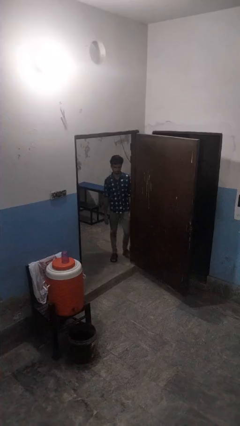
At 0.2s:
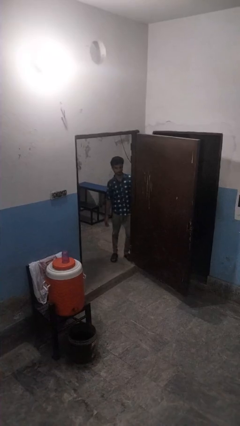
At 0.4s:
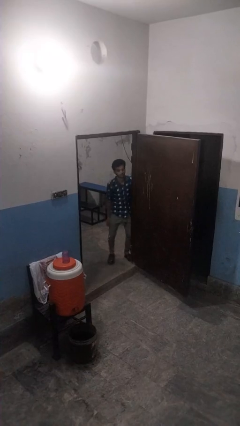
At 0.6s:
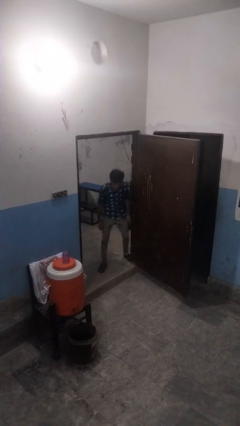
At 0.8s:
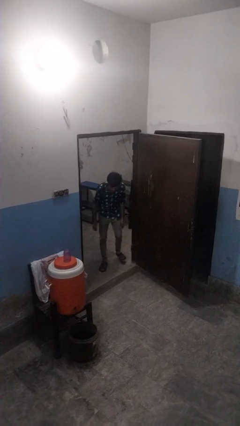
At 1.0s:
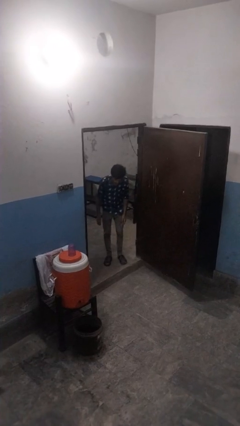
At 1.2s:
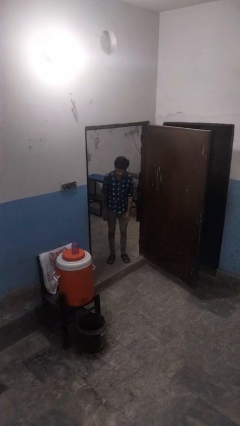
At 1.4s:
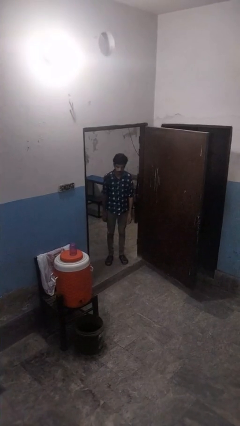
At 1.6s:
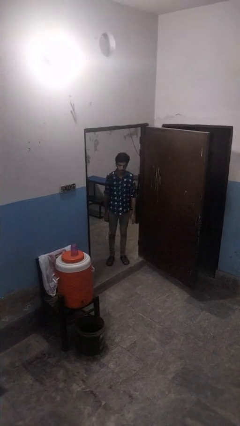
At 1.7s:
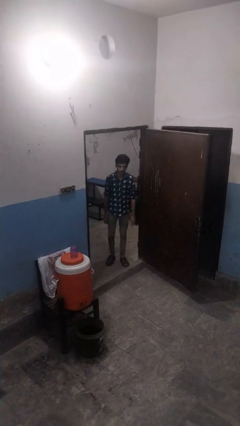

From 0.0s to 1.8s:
person bumps into wall

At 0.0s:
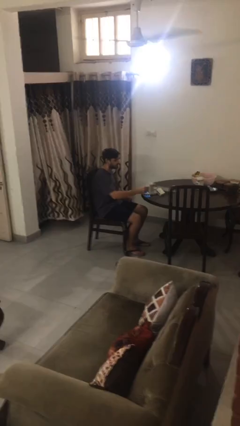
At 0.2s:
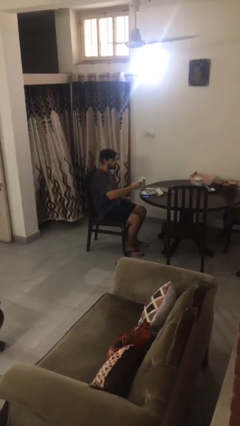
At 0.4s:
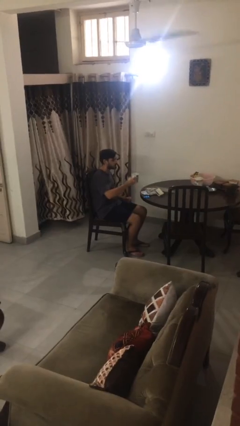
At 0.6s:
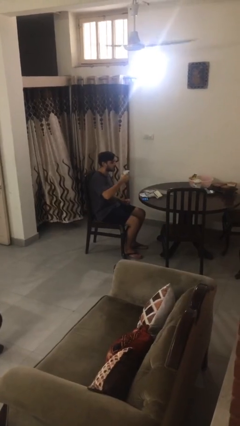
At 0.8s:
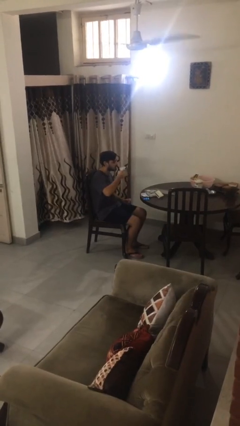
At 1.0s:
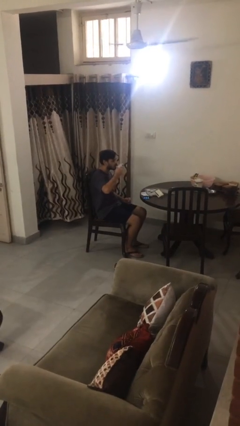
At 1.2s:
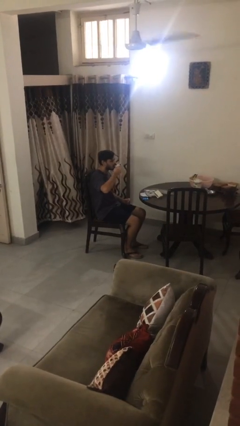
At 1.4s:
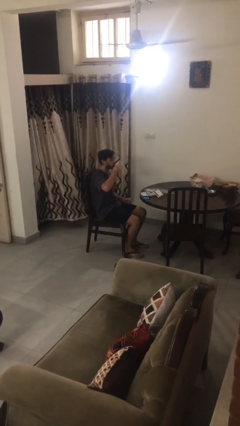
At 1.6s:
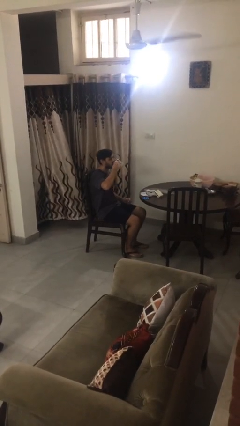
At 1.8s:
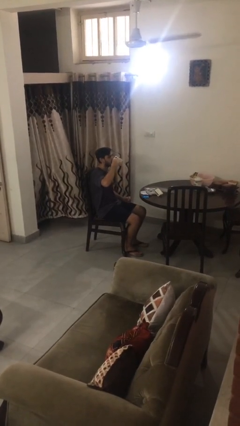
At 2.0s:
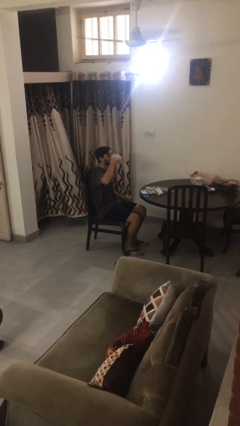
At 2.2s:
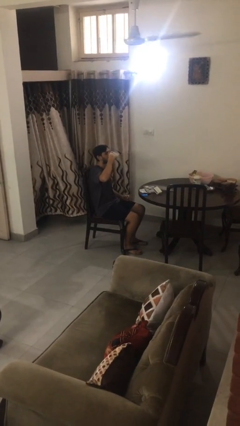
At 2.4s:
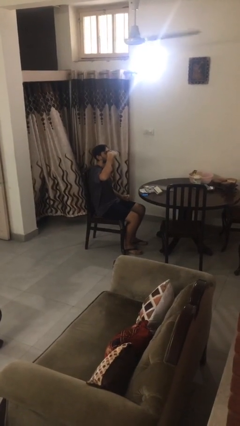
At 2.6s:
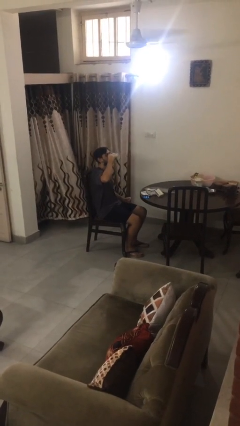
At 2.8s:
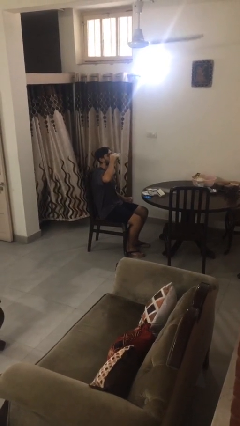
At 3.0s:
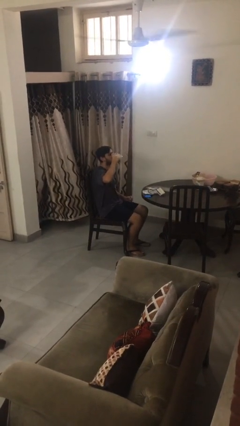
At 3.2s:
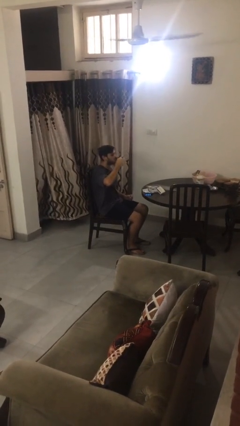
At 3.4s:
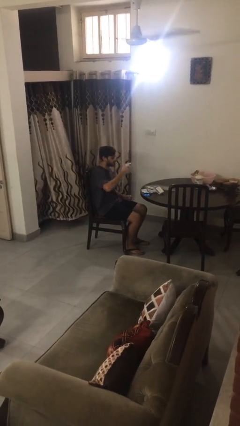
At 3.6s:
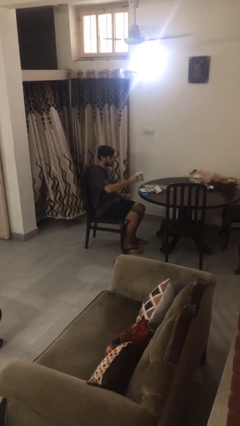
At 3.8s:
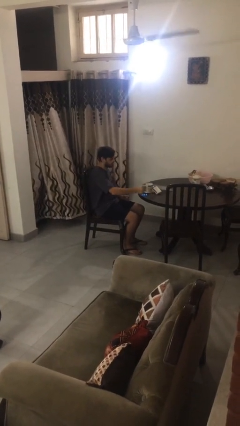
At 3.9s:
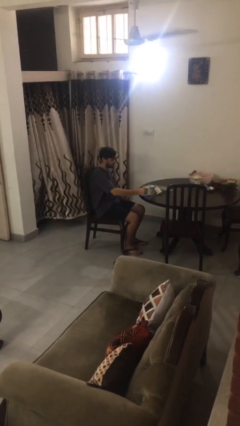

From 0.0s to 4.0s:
person drinks from cup

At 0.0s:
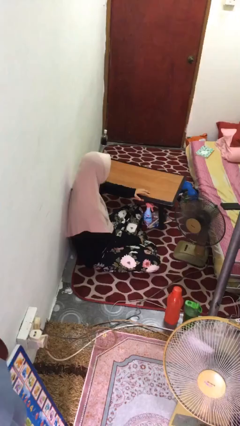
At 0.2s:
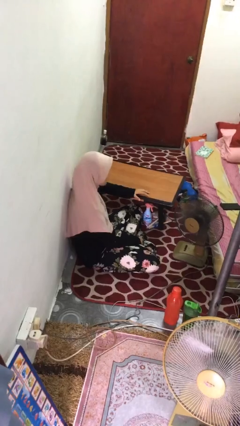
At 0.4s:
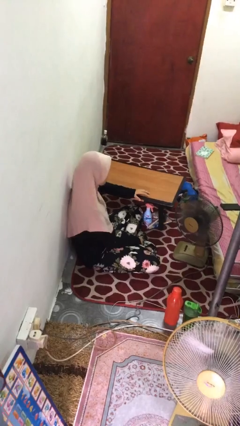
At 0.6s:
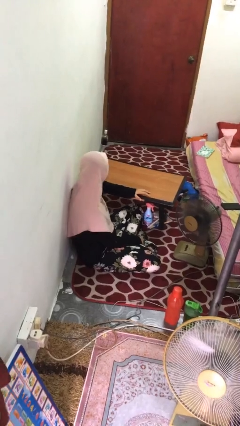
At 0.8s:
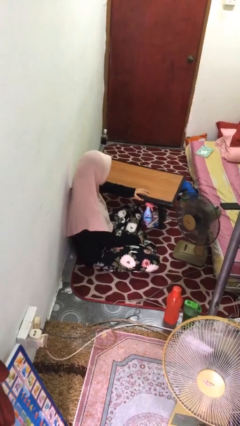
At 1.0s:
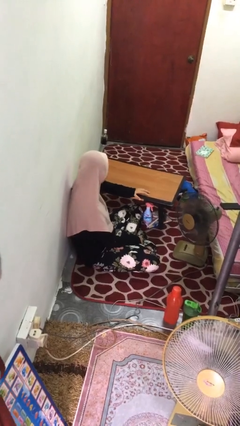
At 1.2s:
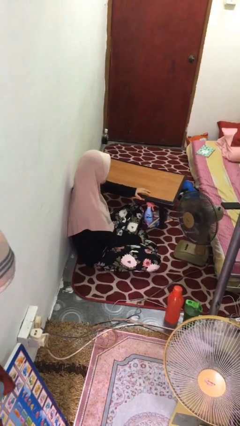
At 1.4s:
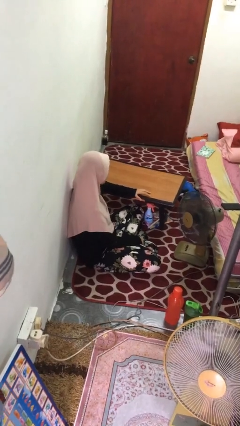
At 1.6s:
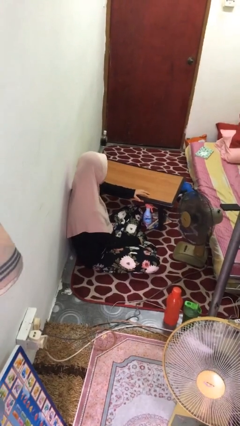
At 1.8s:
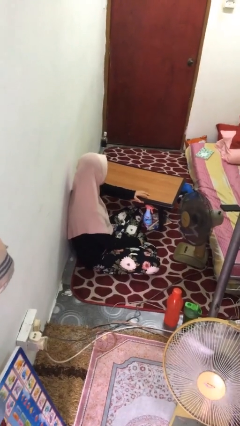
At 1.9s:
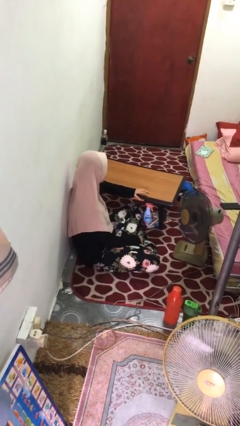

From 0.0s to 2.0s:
person shakes head

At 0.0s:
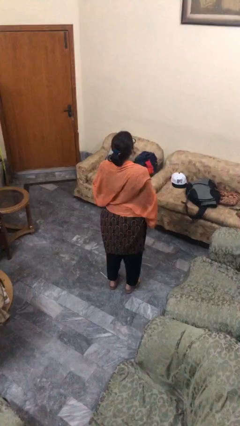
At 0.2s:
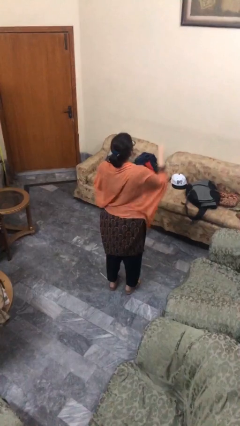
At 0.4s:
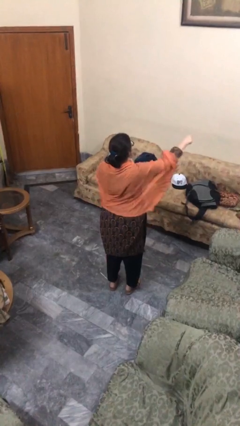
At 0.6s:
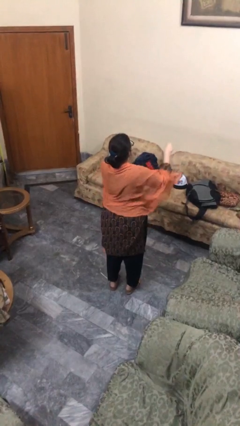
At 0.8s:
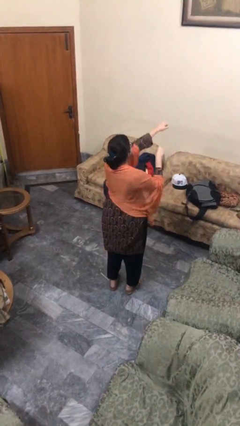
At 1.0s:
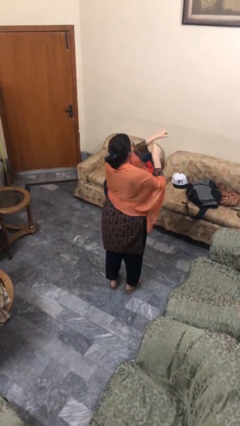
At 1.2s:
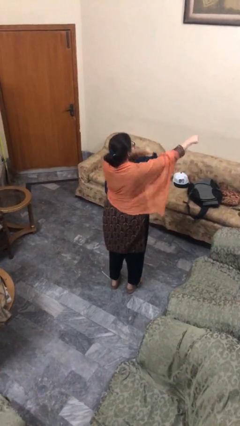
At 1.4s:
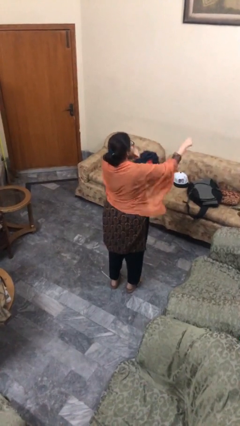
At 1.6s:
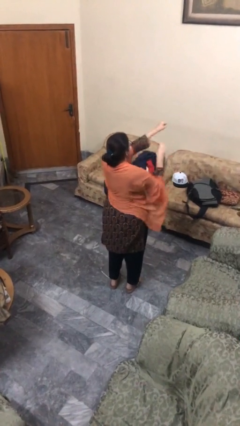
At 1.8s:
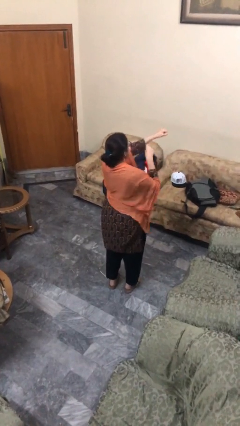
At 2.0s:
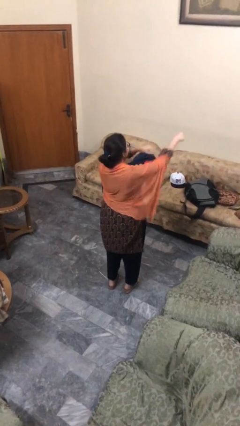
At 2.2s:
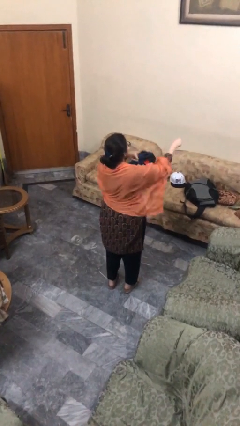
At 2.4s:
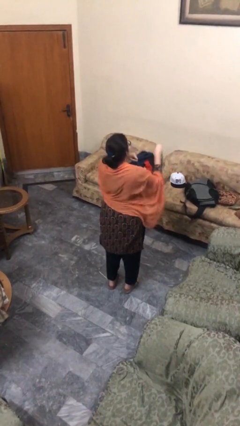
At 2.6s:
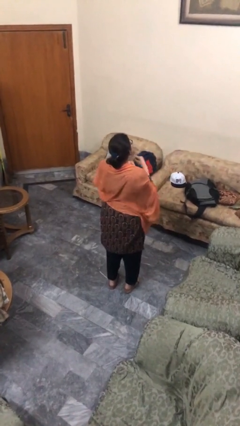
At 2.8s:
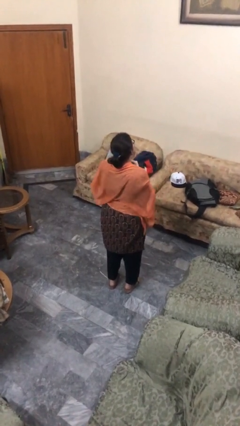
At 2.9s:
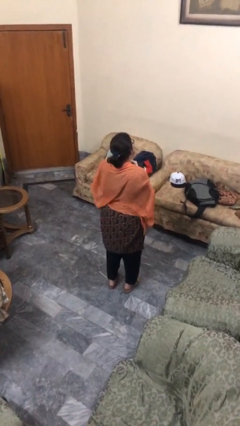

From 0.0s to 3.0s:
person punches

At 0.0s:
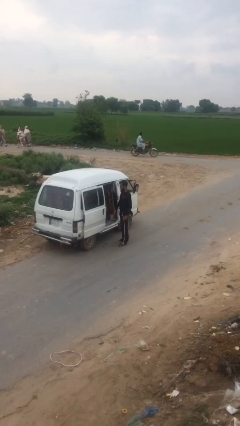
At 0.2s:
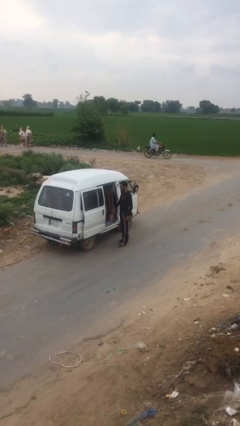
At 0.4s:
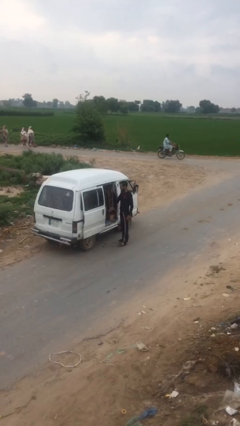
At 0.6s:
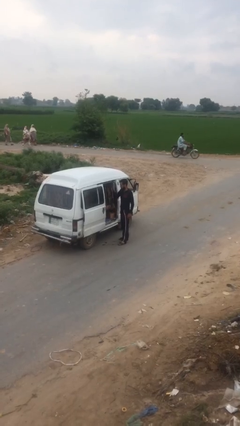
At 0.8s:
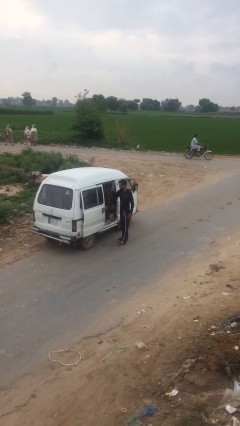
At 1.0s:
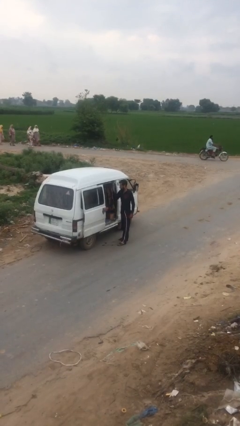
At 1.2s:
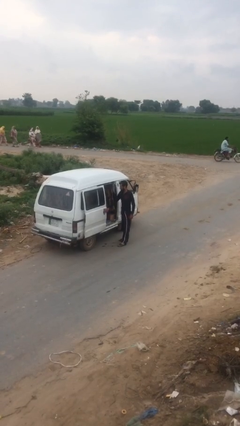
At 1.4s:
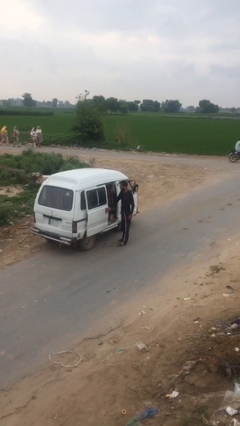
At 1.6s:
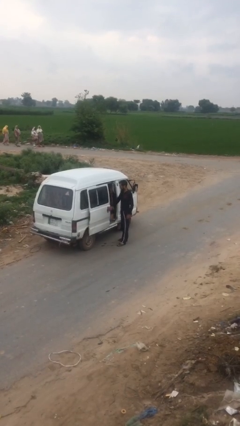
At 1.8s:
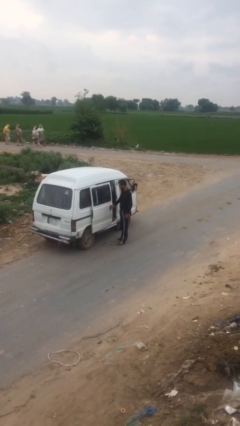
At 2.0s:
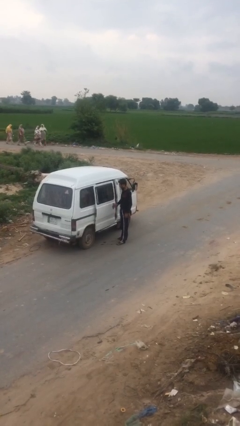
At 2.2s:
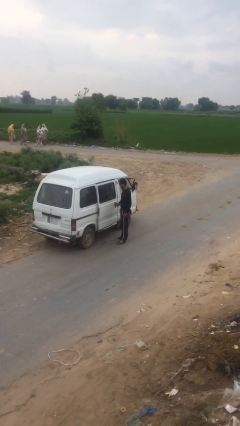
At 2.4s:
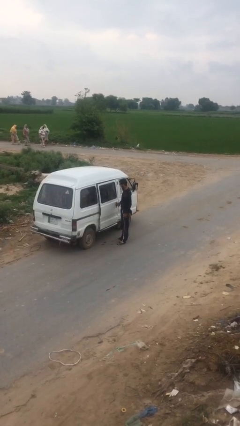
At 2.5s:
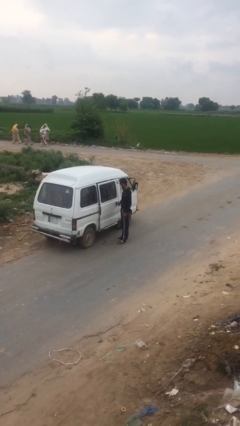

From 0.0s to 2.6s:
person closes car door

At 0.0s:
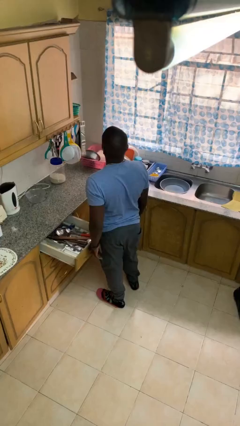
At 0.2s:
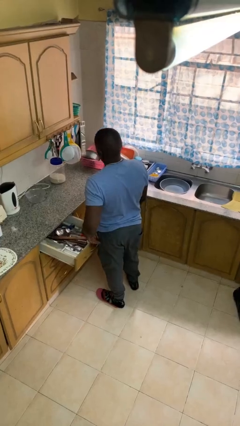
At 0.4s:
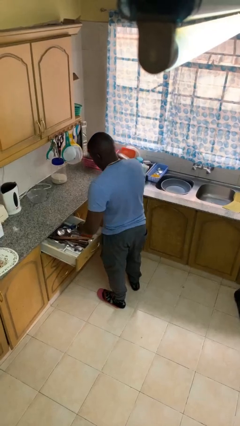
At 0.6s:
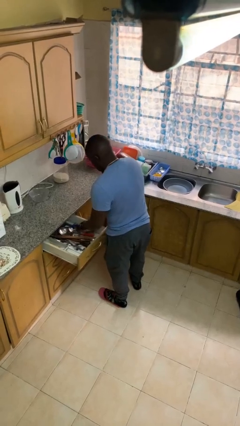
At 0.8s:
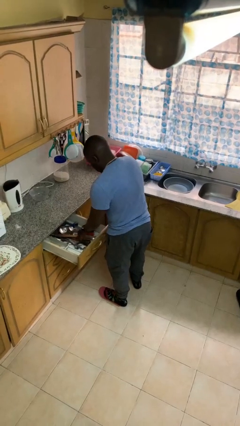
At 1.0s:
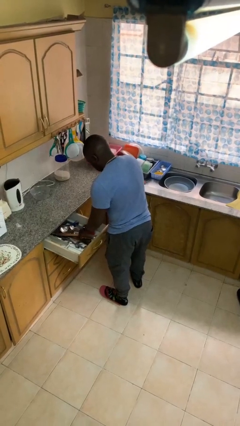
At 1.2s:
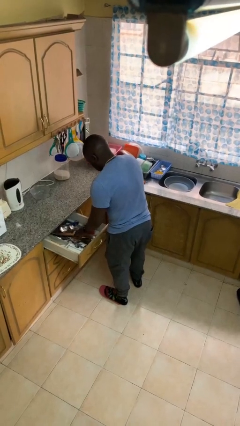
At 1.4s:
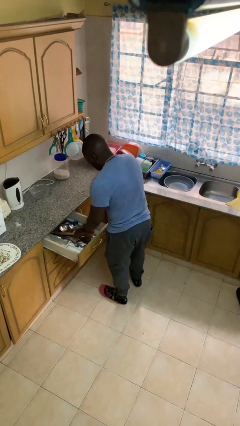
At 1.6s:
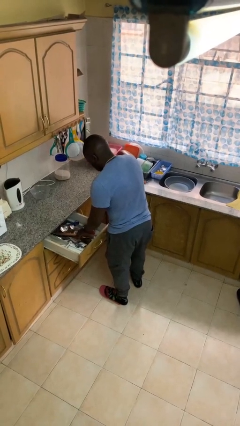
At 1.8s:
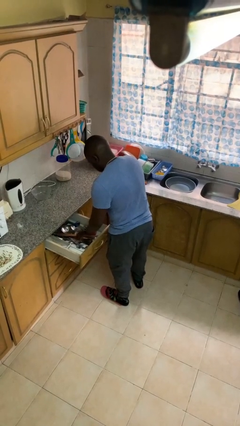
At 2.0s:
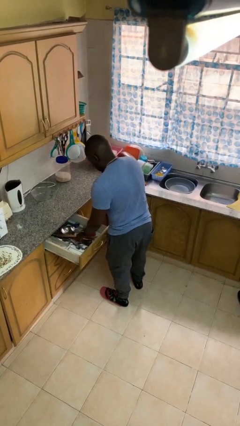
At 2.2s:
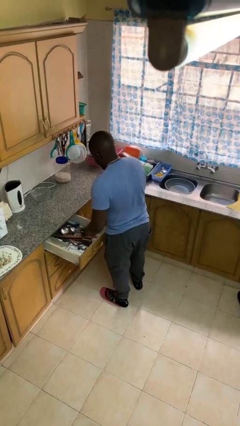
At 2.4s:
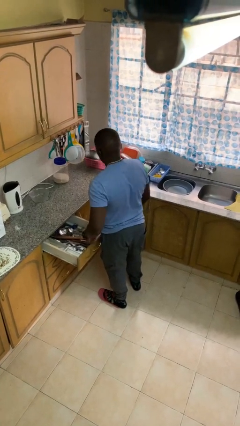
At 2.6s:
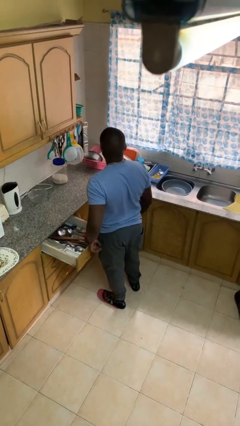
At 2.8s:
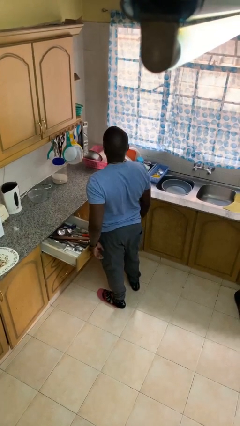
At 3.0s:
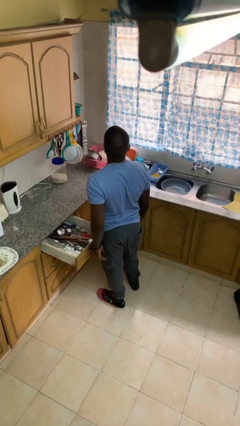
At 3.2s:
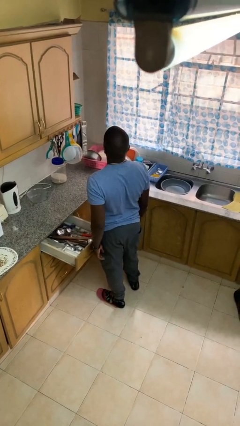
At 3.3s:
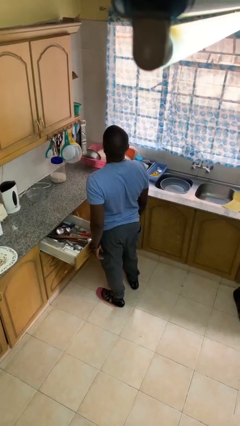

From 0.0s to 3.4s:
person searches in kitchen drawer

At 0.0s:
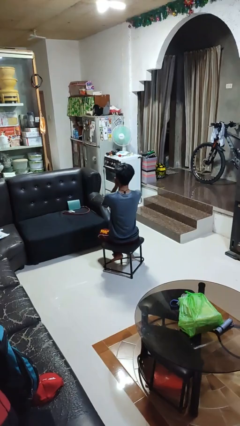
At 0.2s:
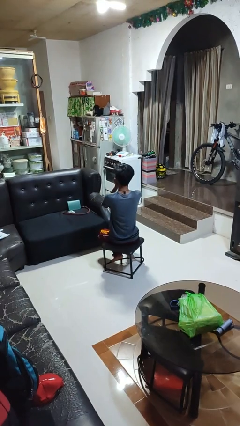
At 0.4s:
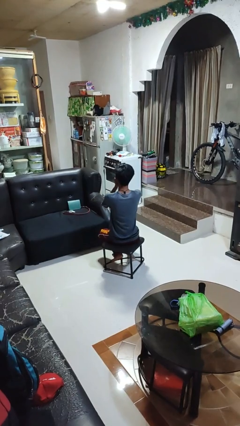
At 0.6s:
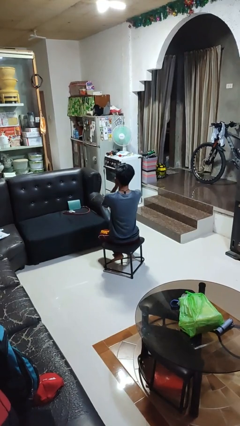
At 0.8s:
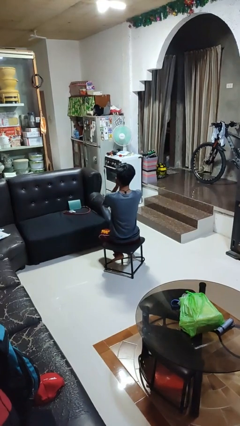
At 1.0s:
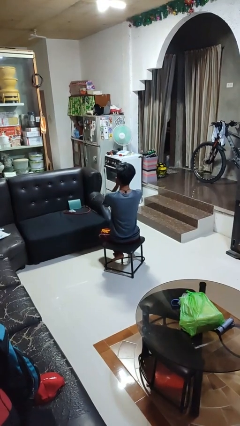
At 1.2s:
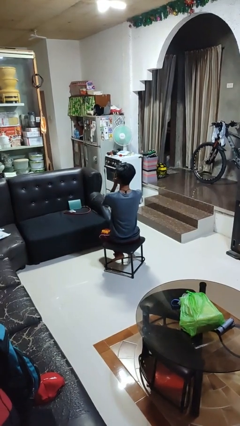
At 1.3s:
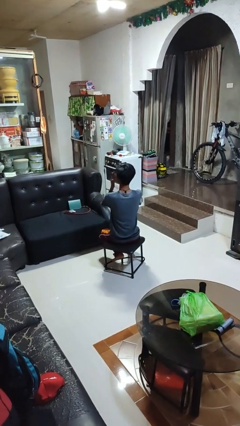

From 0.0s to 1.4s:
person covers face with hands
